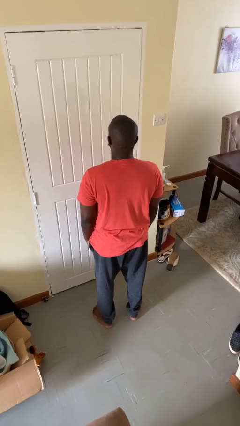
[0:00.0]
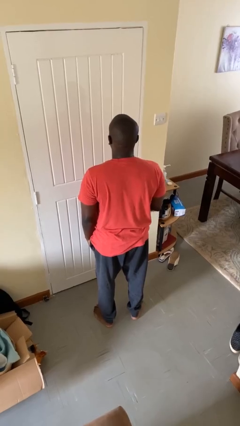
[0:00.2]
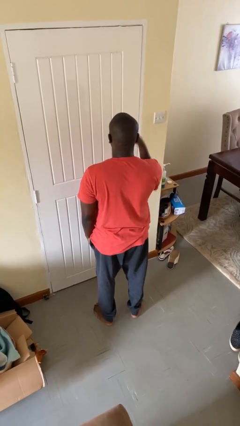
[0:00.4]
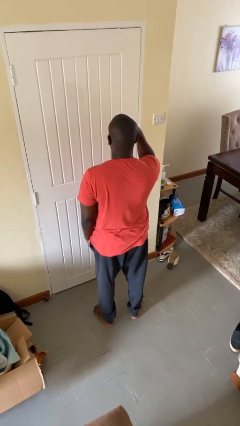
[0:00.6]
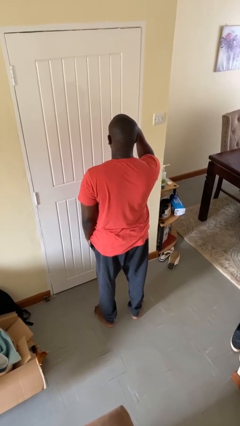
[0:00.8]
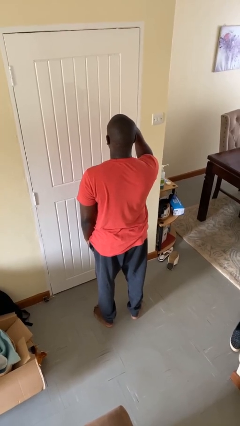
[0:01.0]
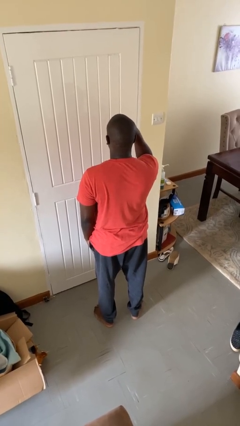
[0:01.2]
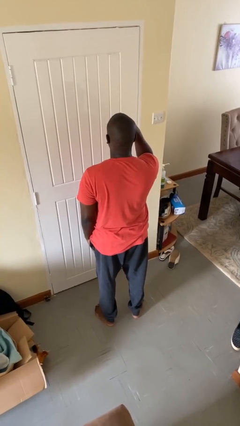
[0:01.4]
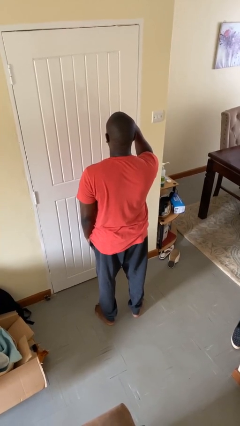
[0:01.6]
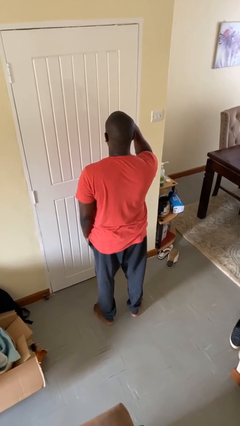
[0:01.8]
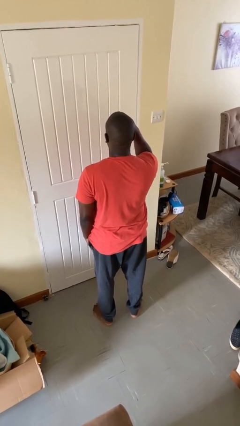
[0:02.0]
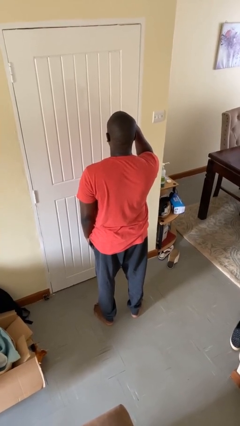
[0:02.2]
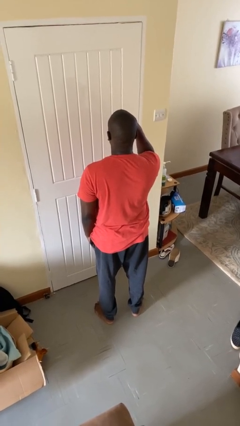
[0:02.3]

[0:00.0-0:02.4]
person salutes

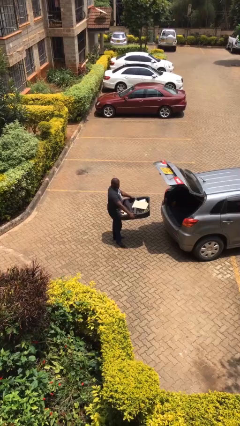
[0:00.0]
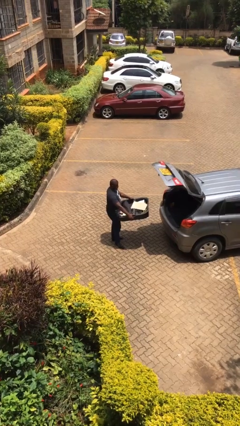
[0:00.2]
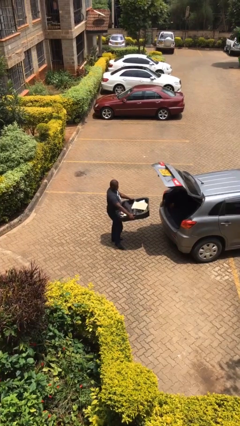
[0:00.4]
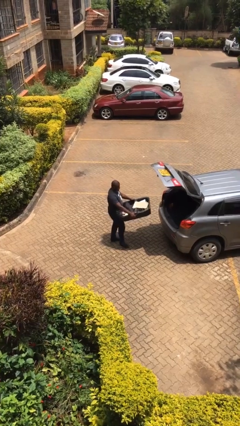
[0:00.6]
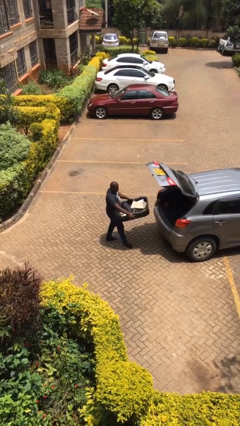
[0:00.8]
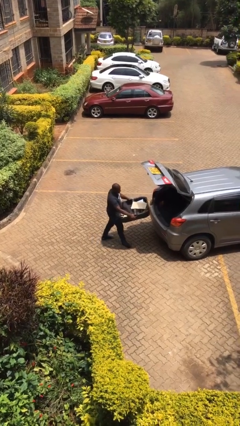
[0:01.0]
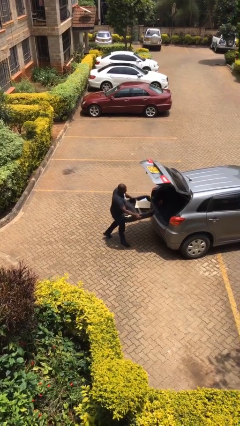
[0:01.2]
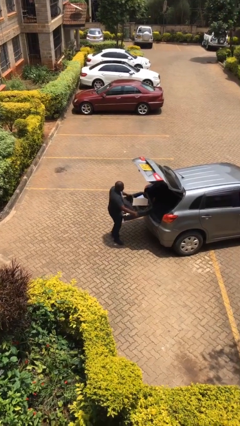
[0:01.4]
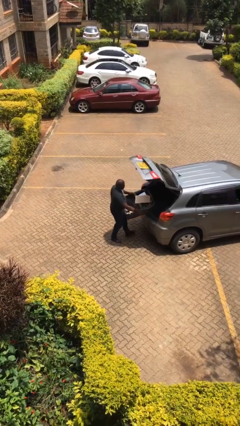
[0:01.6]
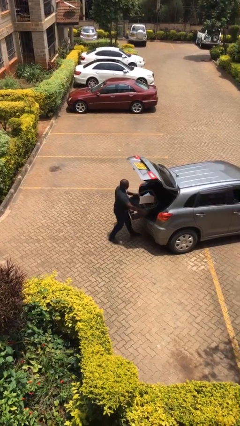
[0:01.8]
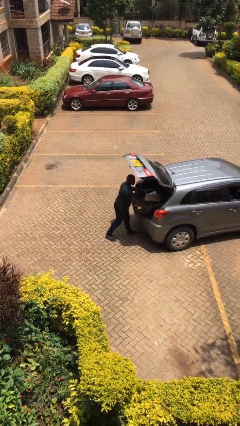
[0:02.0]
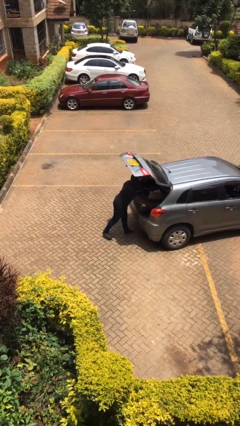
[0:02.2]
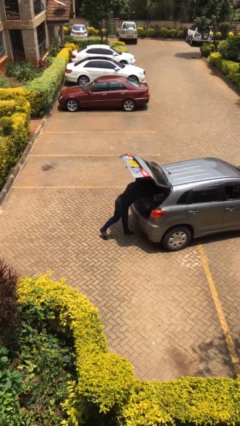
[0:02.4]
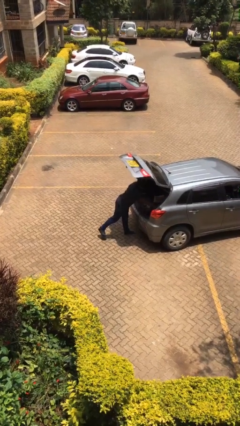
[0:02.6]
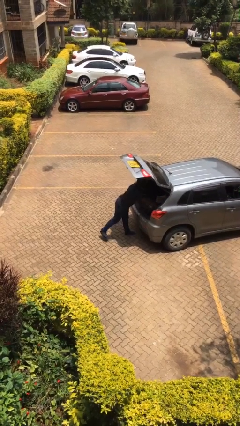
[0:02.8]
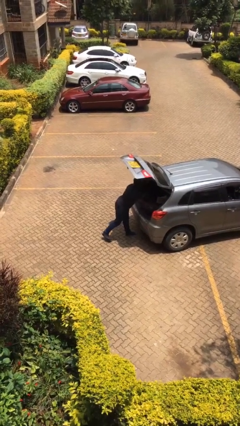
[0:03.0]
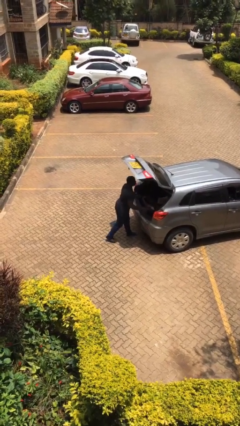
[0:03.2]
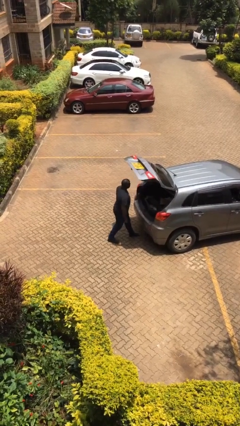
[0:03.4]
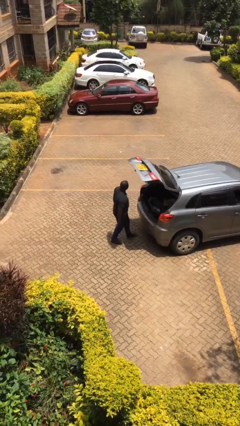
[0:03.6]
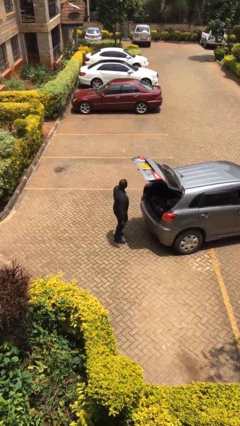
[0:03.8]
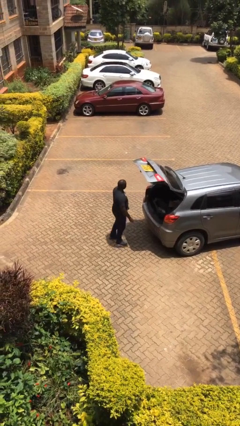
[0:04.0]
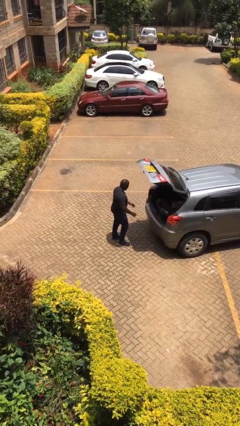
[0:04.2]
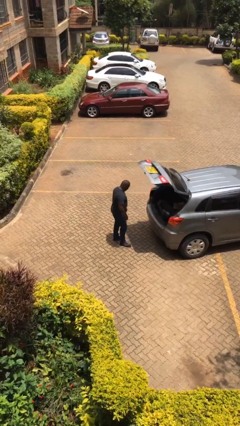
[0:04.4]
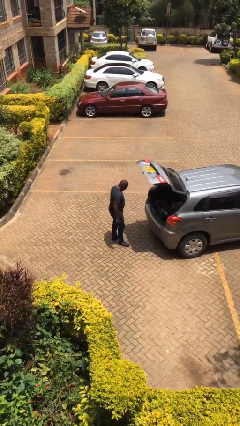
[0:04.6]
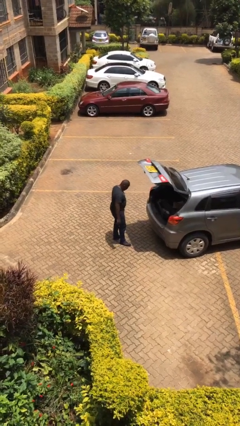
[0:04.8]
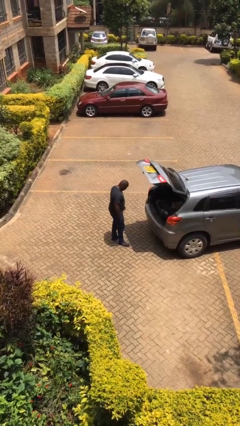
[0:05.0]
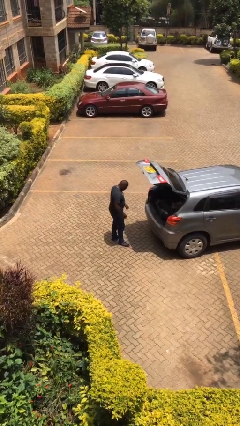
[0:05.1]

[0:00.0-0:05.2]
person loads car

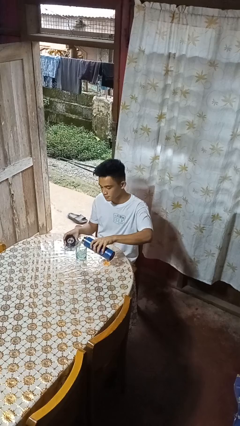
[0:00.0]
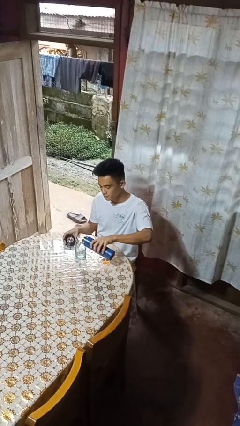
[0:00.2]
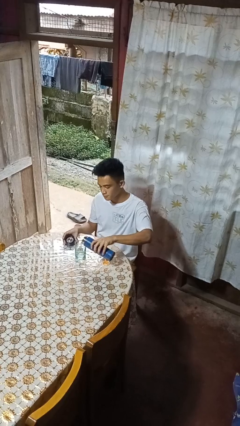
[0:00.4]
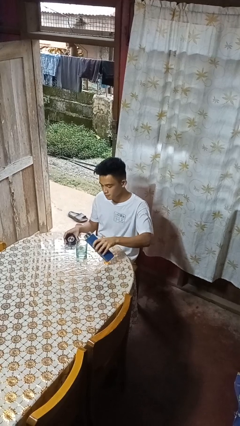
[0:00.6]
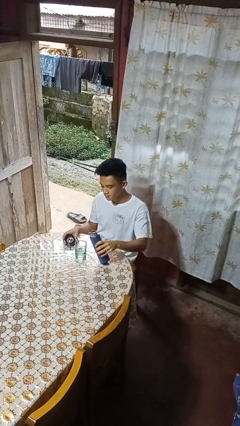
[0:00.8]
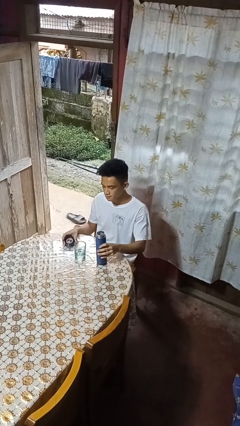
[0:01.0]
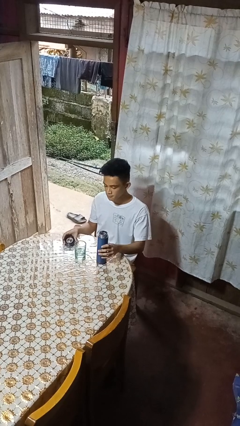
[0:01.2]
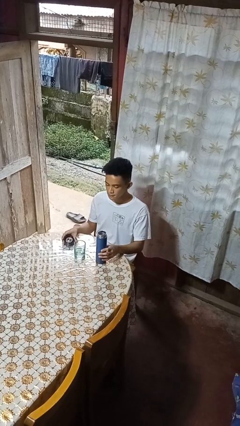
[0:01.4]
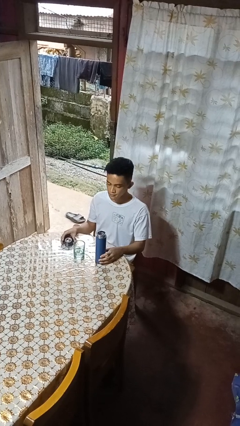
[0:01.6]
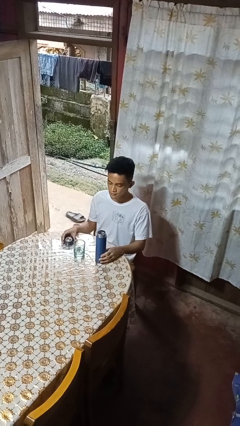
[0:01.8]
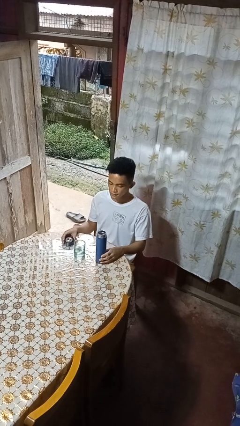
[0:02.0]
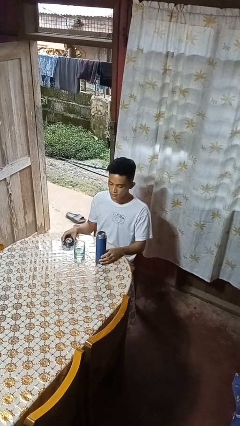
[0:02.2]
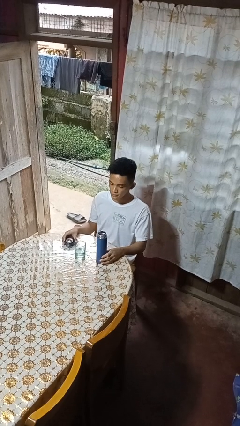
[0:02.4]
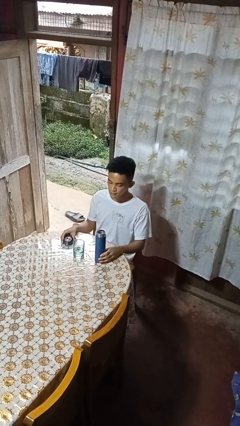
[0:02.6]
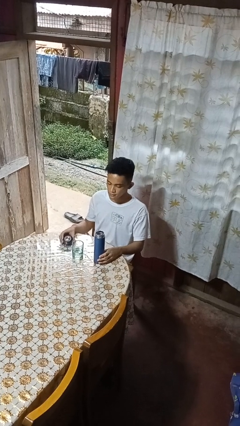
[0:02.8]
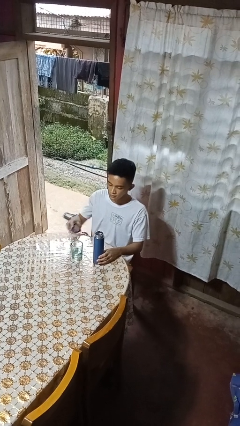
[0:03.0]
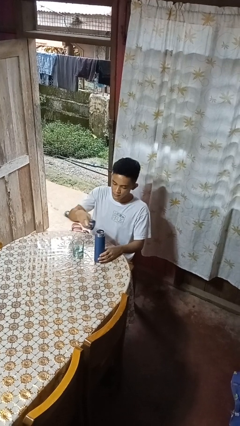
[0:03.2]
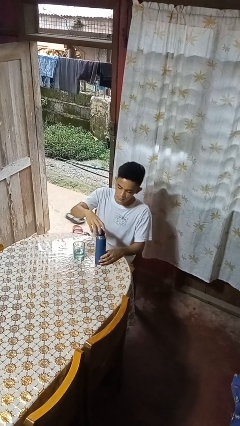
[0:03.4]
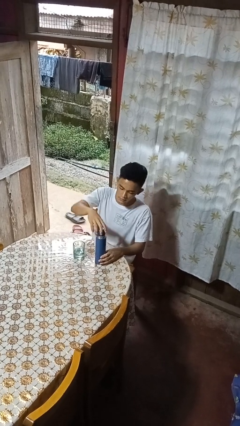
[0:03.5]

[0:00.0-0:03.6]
person pours liquid into cup

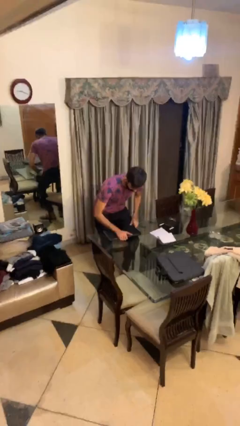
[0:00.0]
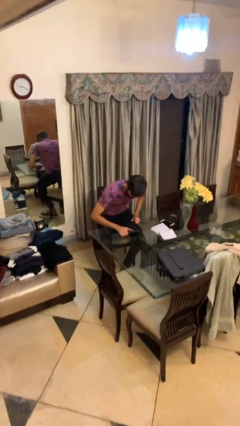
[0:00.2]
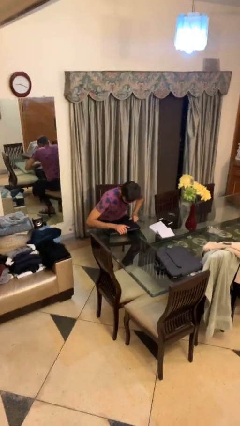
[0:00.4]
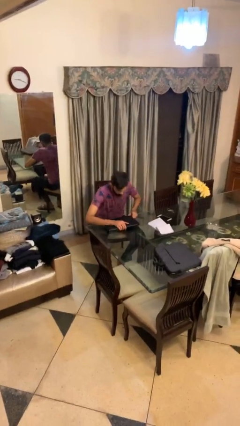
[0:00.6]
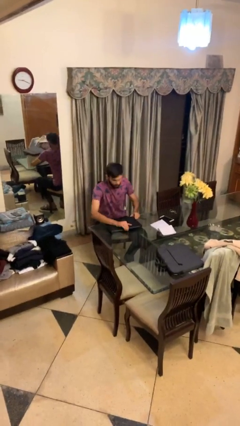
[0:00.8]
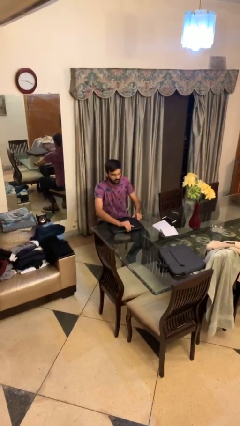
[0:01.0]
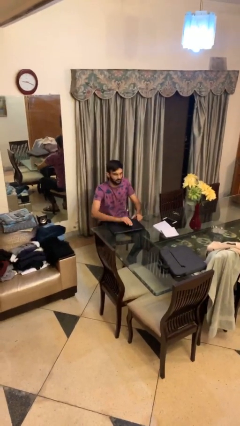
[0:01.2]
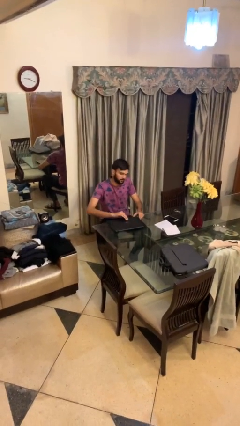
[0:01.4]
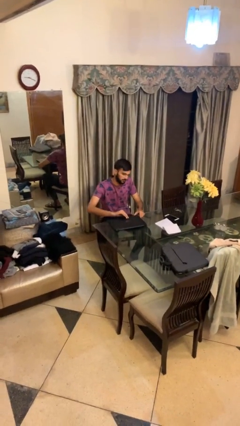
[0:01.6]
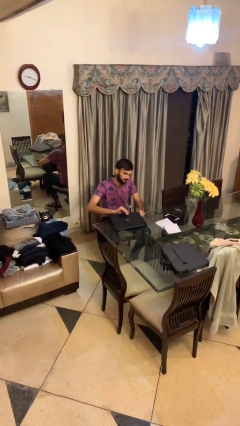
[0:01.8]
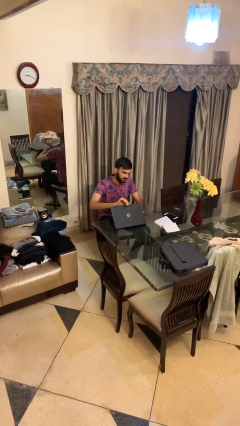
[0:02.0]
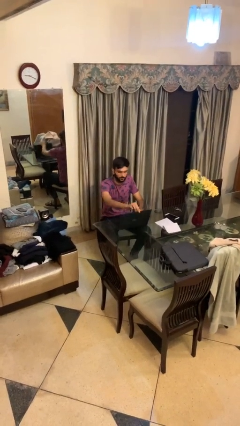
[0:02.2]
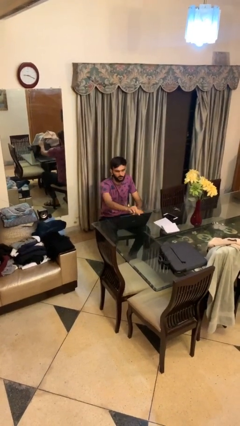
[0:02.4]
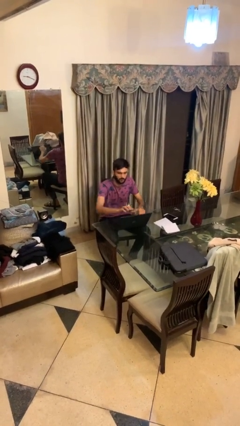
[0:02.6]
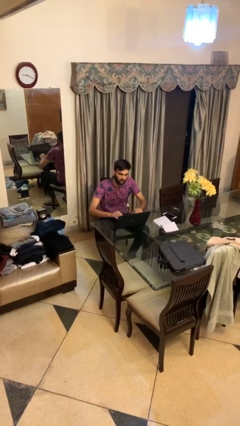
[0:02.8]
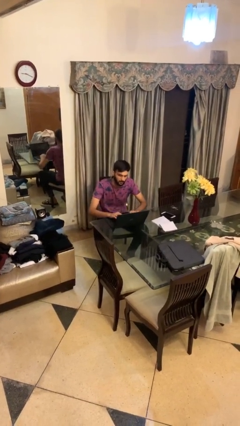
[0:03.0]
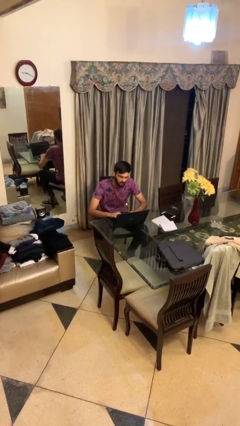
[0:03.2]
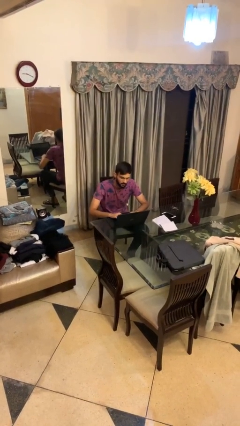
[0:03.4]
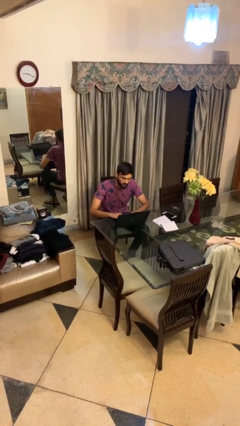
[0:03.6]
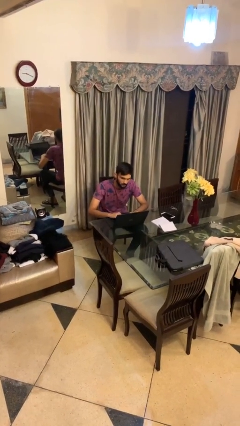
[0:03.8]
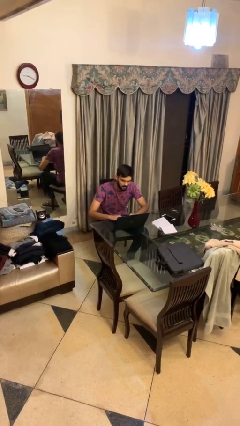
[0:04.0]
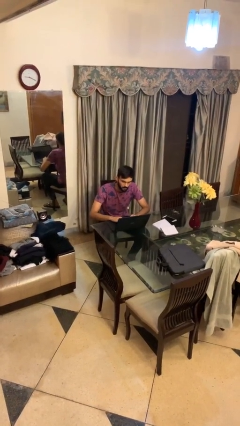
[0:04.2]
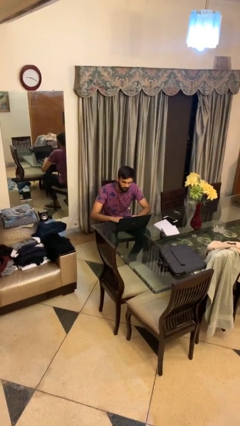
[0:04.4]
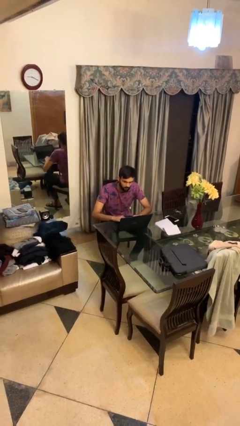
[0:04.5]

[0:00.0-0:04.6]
person interacts with laptop

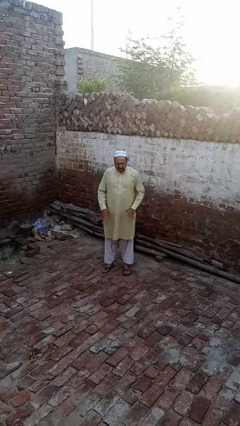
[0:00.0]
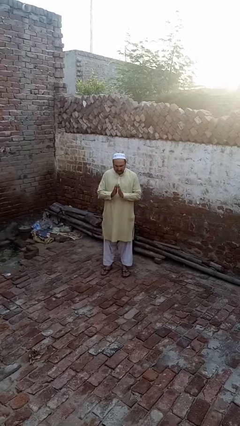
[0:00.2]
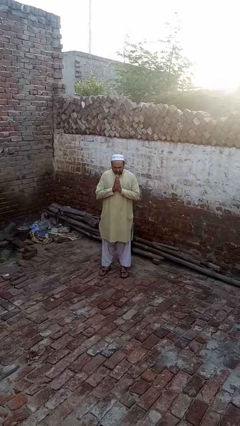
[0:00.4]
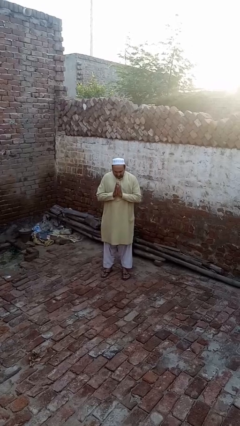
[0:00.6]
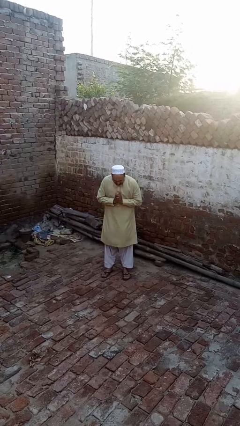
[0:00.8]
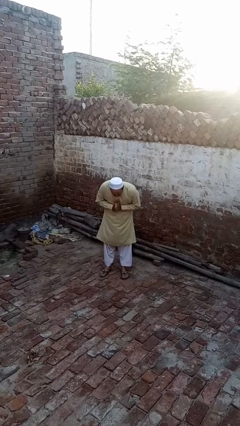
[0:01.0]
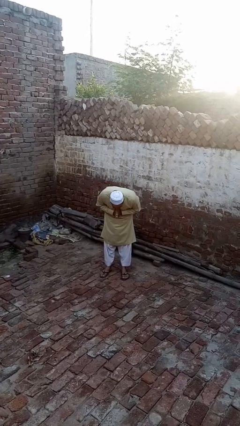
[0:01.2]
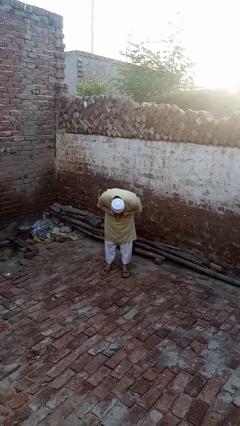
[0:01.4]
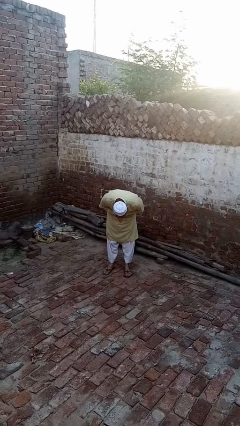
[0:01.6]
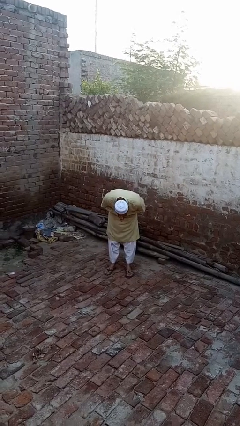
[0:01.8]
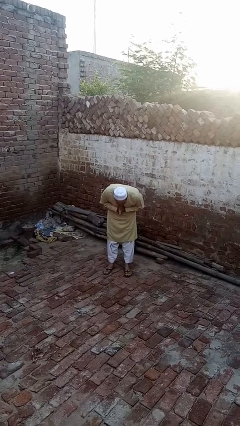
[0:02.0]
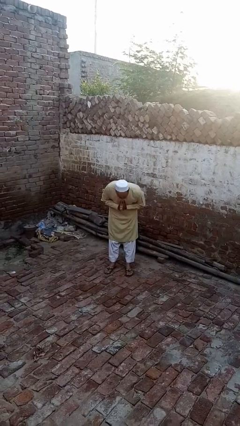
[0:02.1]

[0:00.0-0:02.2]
person bows
